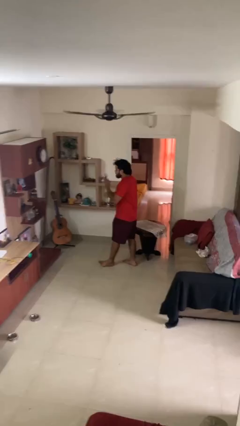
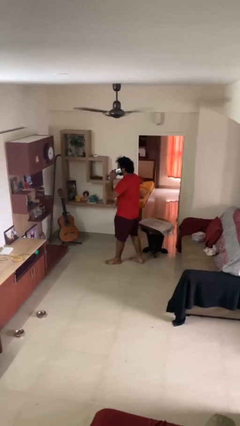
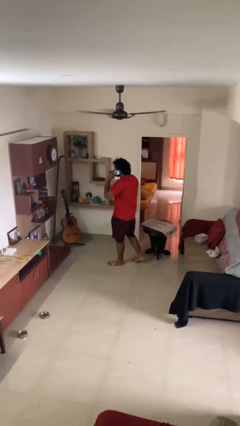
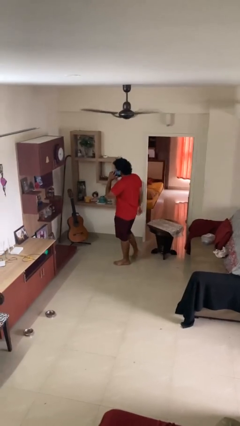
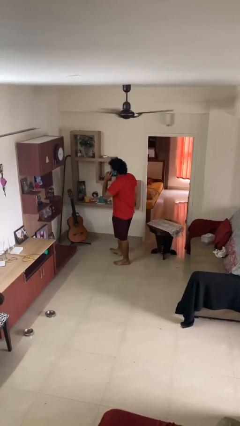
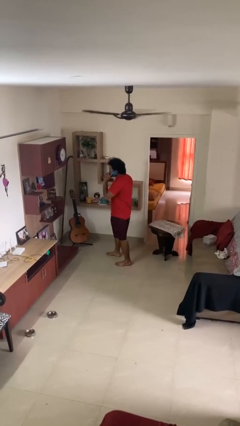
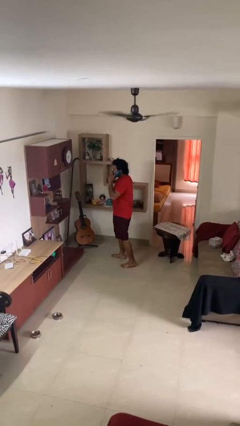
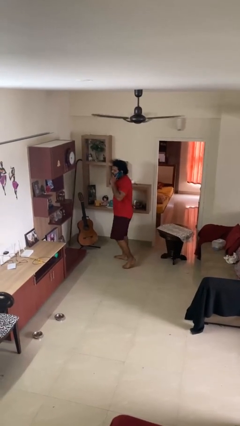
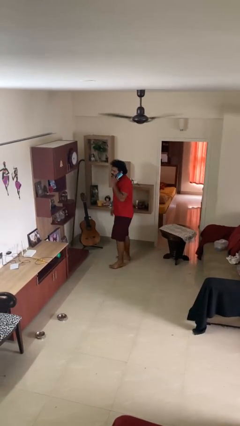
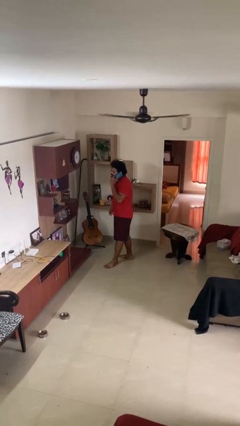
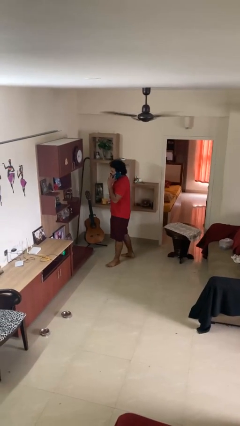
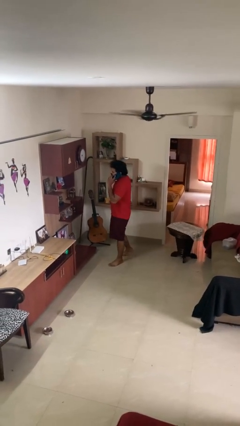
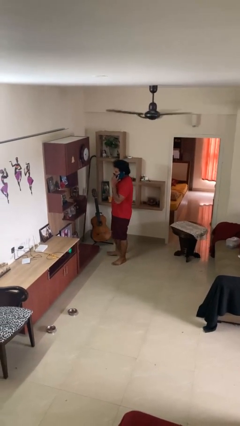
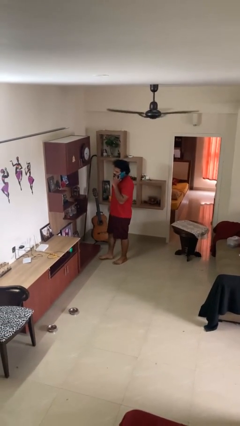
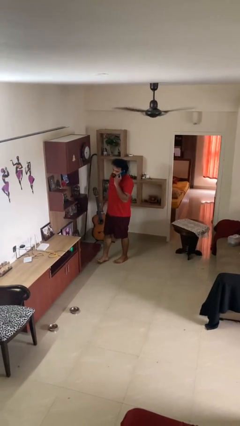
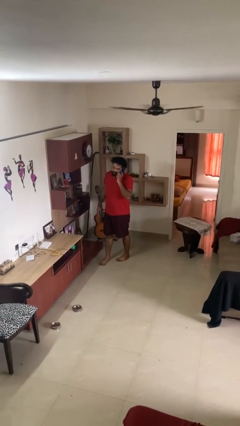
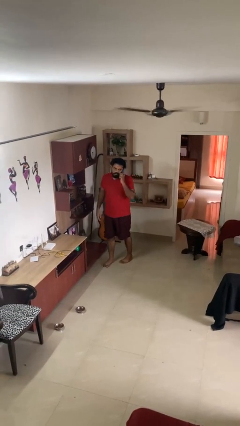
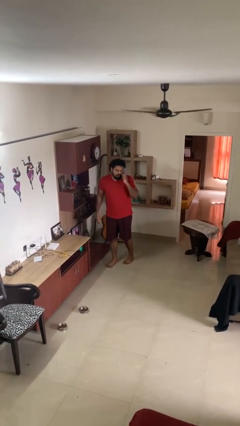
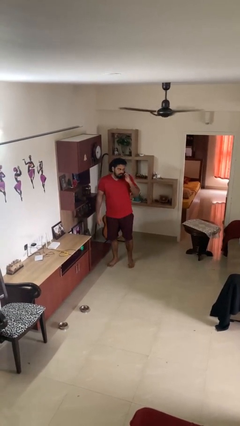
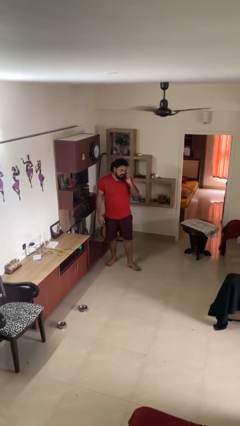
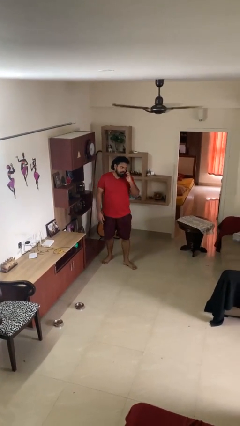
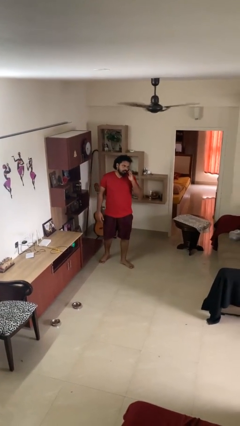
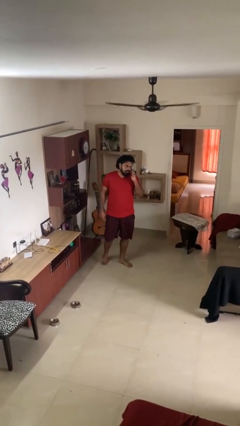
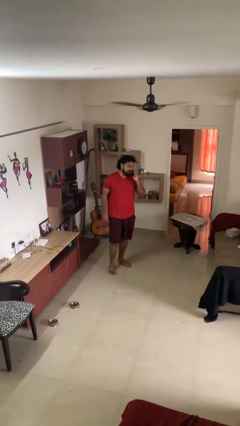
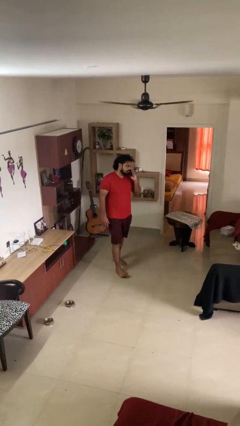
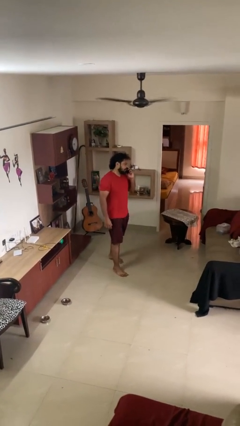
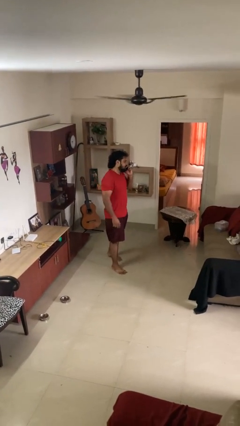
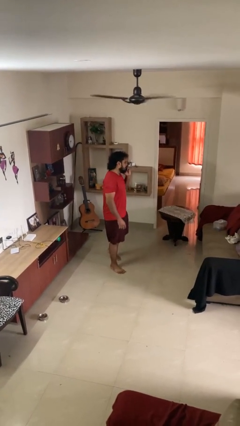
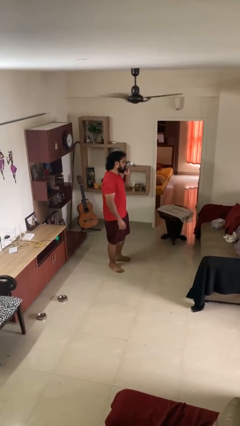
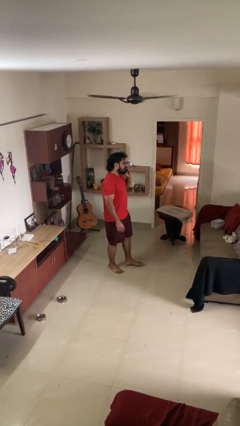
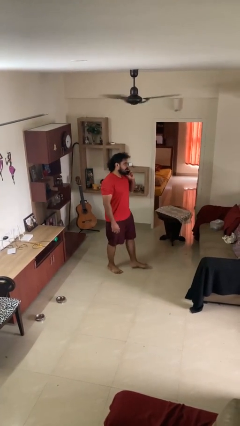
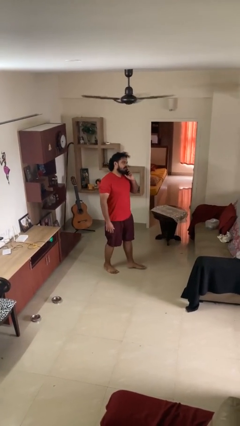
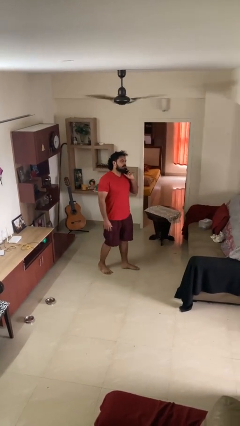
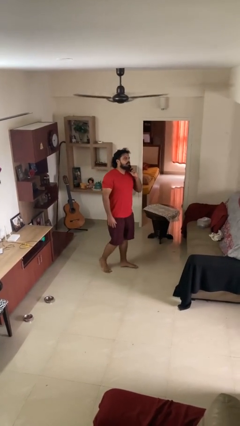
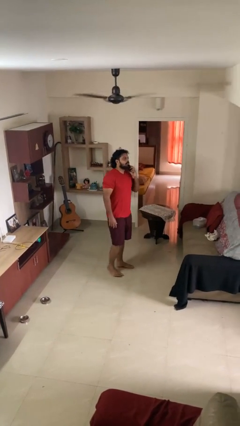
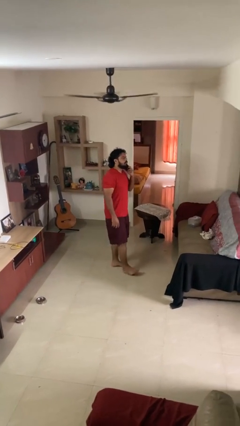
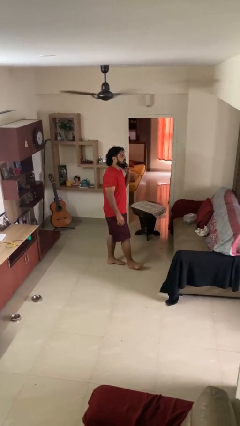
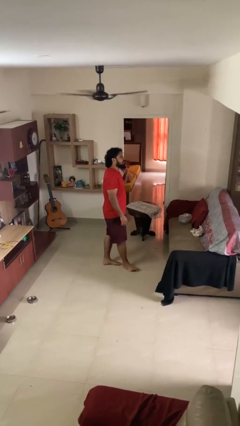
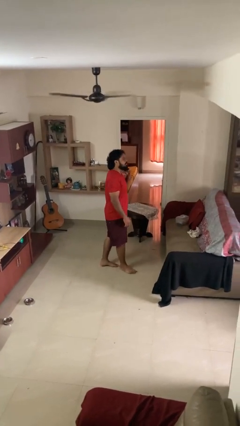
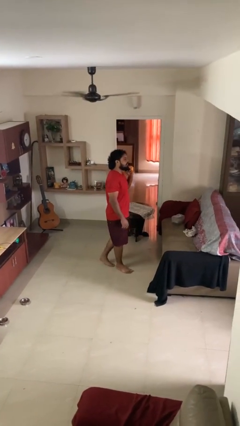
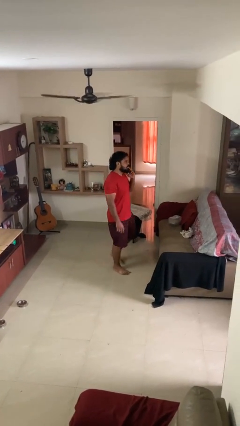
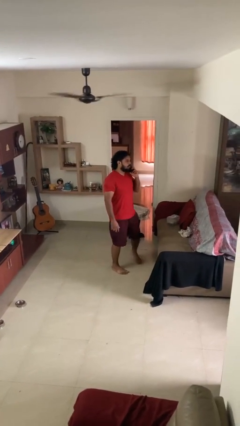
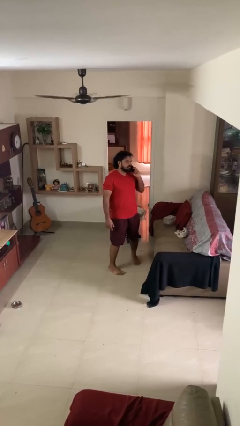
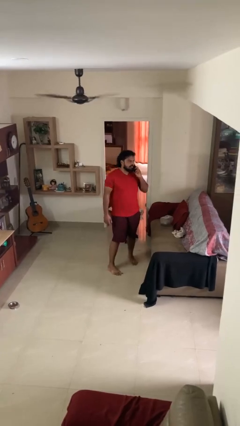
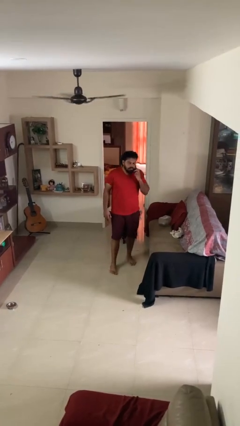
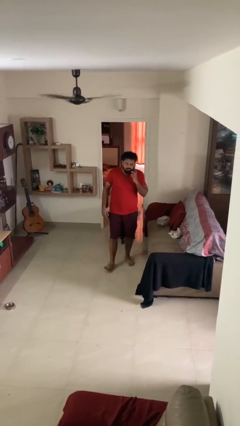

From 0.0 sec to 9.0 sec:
person talks on phone

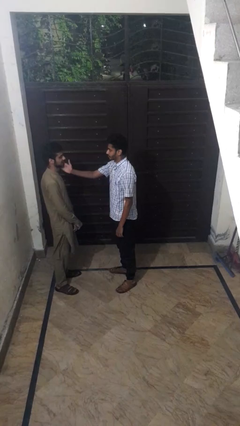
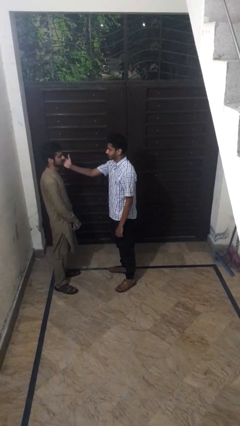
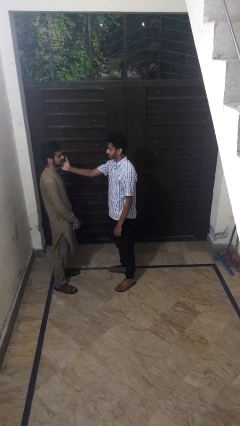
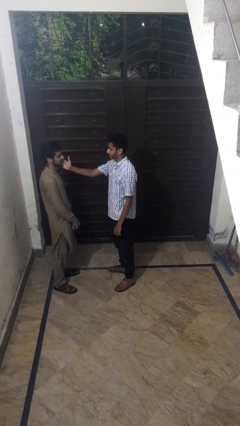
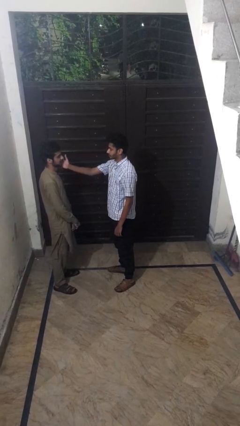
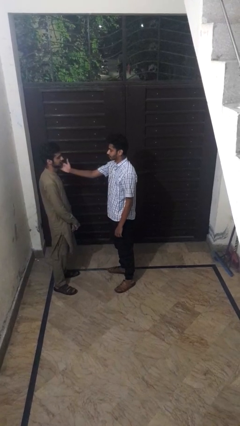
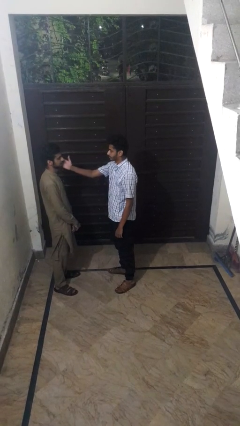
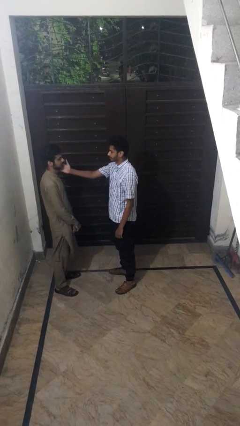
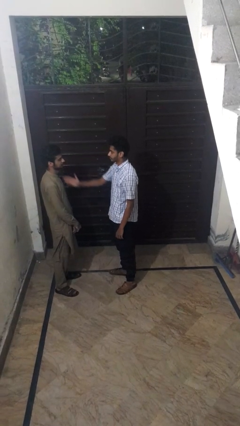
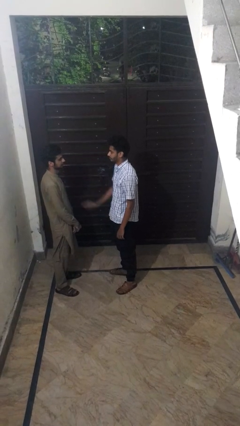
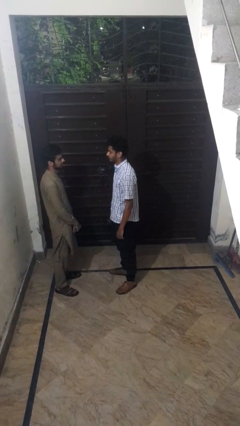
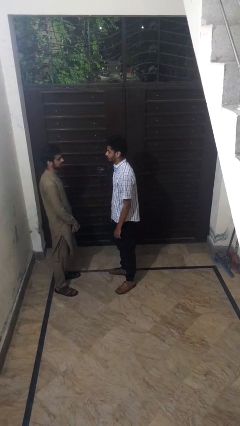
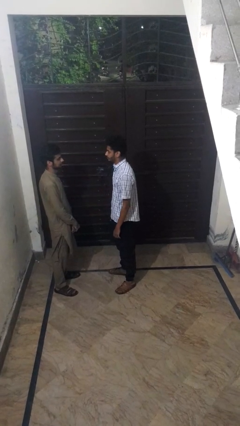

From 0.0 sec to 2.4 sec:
person touches face of person

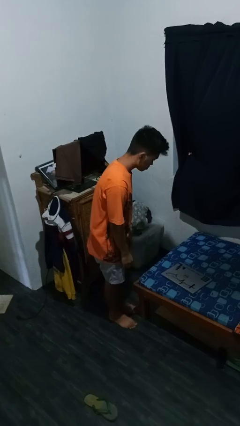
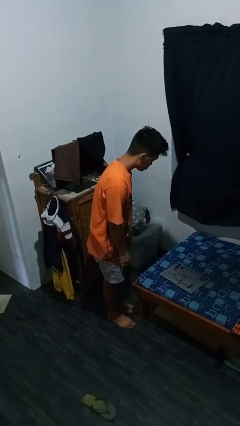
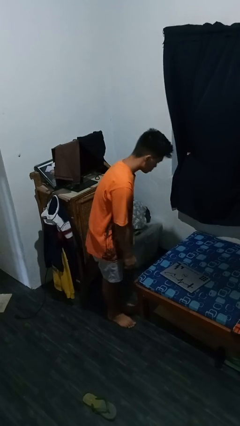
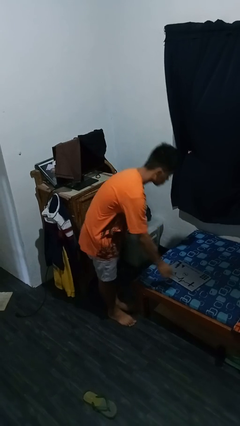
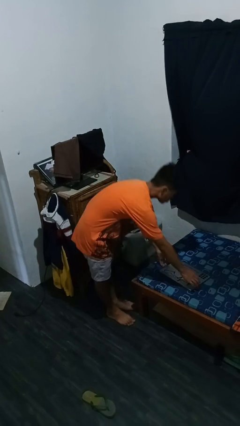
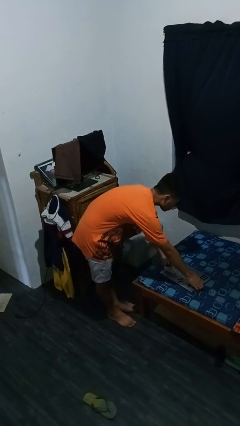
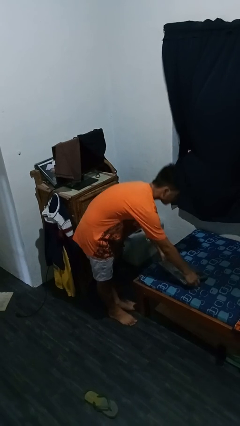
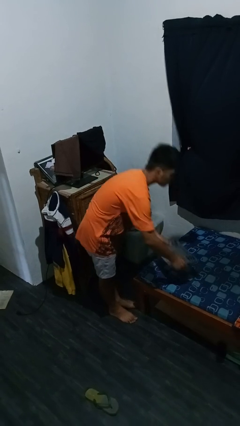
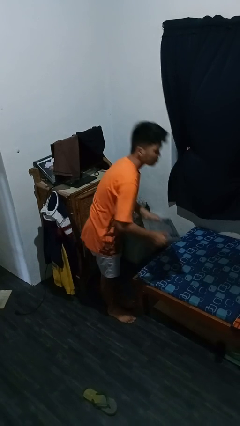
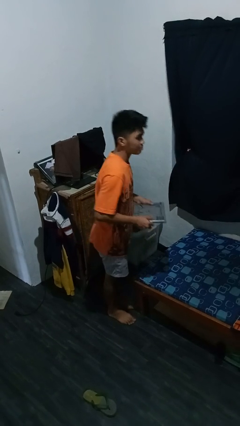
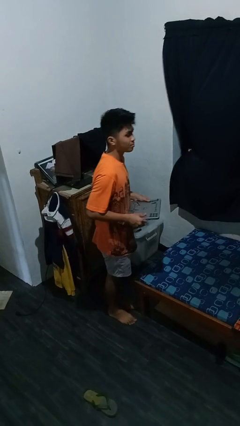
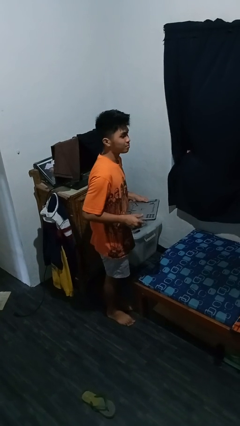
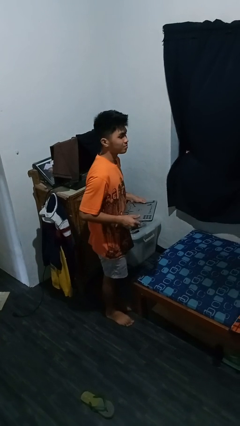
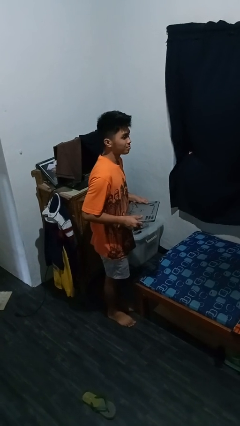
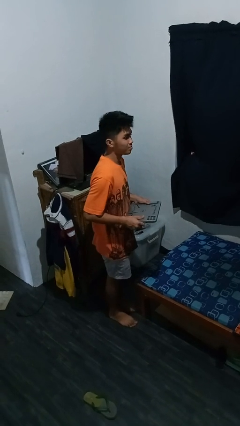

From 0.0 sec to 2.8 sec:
person picks up object from bed

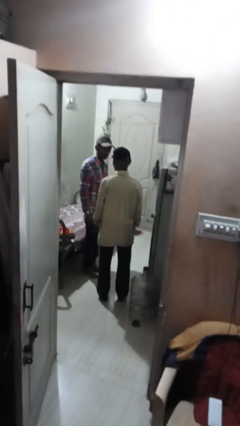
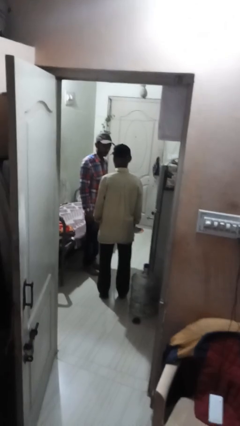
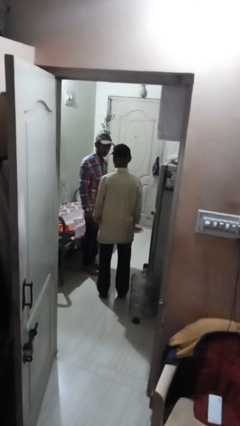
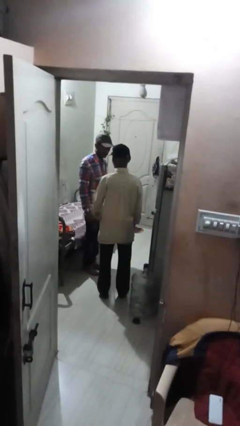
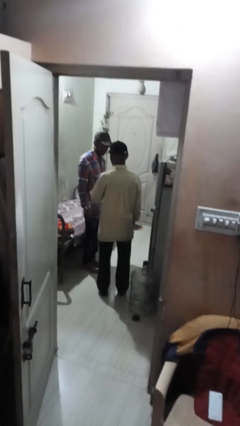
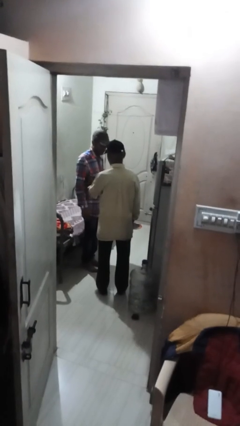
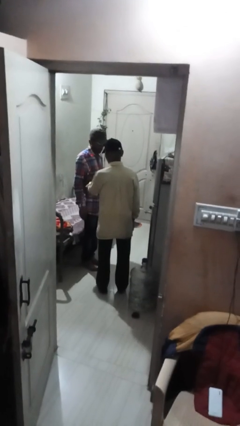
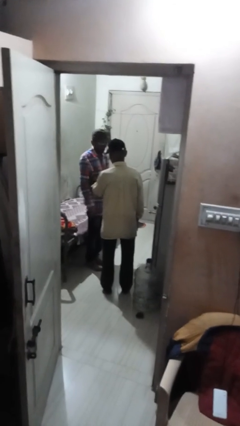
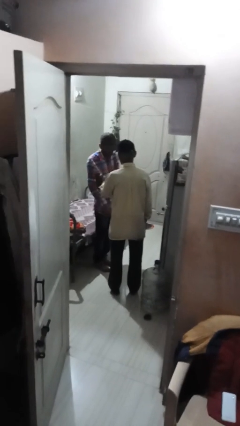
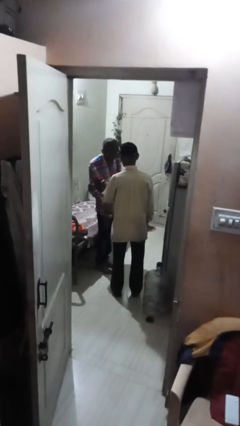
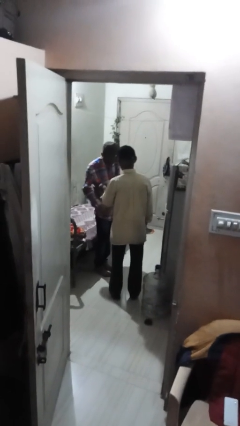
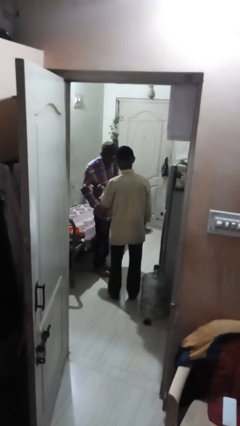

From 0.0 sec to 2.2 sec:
person tickles person

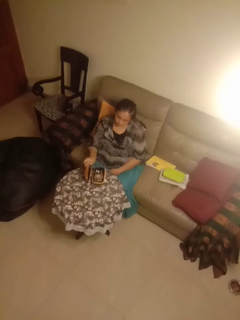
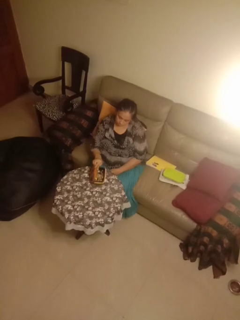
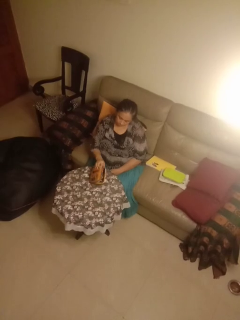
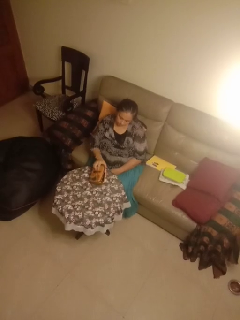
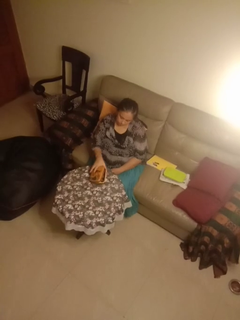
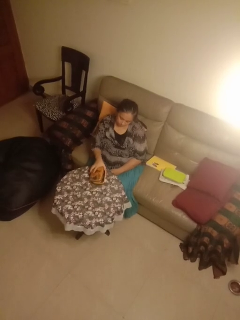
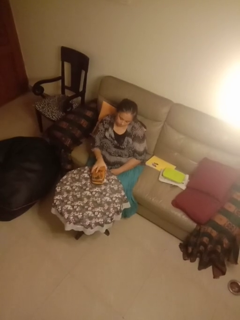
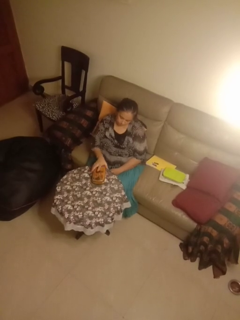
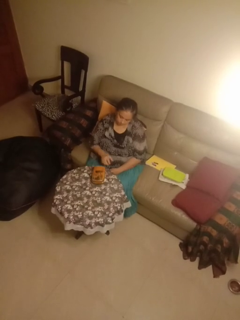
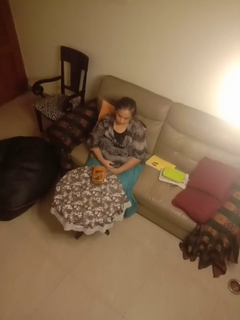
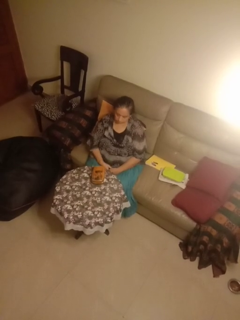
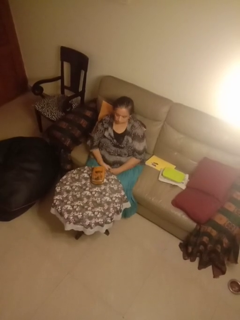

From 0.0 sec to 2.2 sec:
person closes jewelry box
